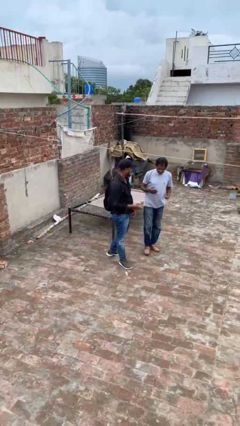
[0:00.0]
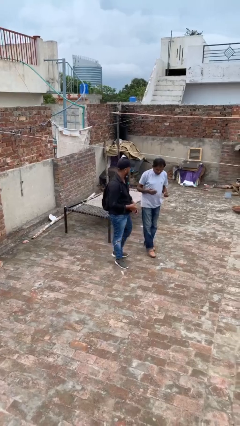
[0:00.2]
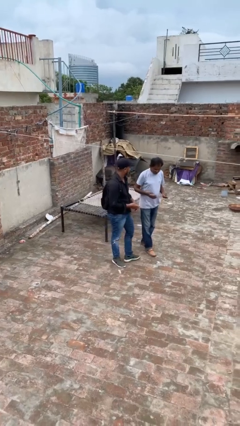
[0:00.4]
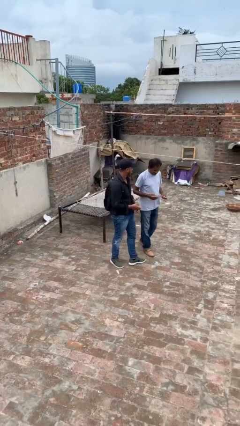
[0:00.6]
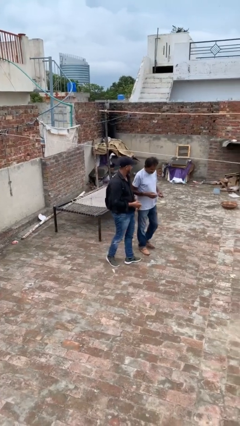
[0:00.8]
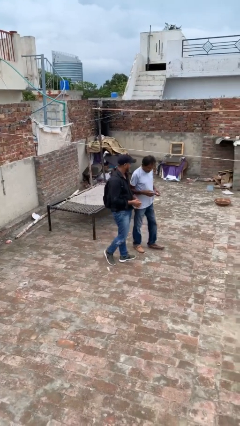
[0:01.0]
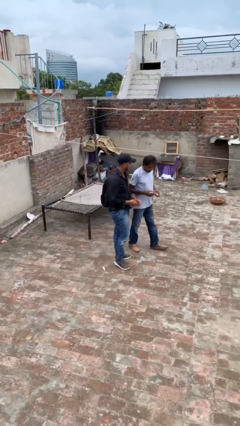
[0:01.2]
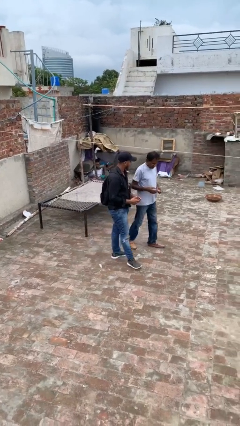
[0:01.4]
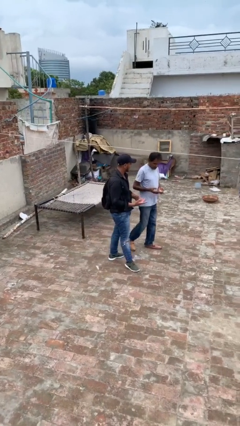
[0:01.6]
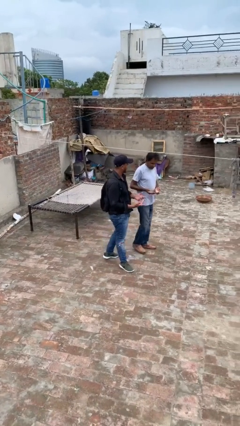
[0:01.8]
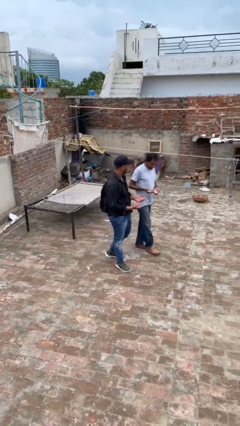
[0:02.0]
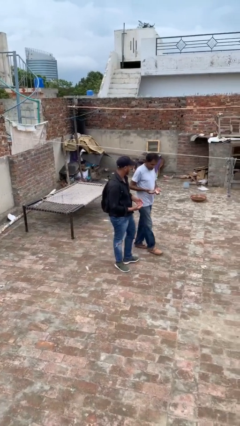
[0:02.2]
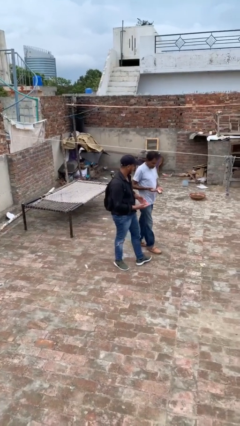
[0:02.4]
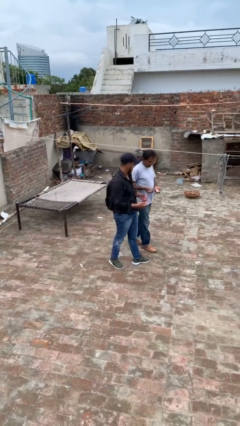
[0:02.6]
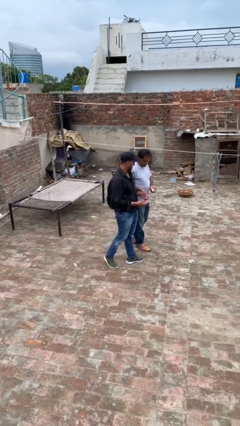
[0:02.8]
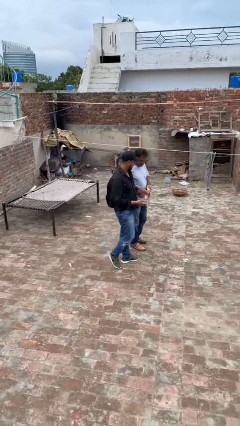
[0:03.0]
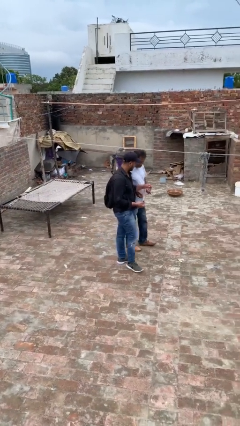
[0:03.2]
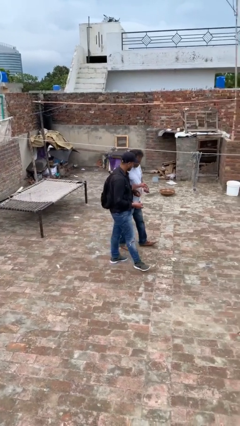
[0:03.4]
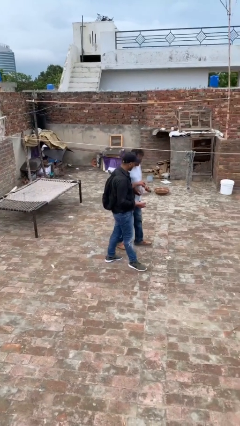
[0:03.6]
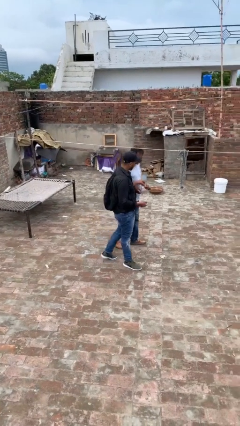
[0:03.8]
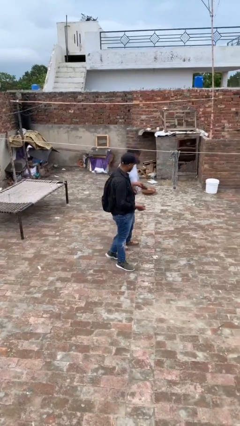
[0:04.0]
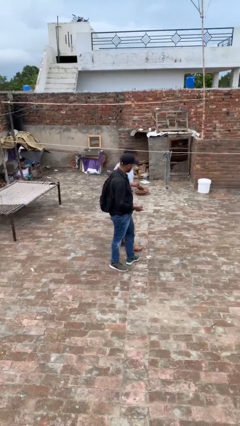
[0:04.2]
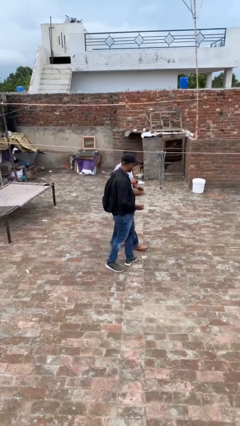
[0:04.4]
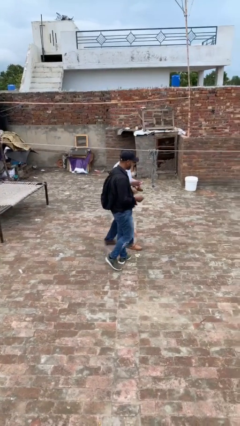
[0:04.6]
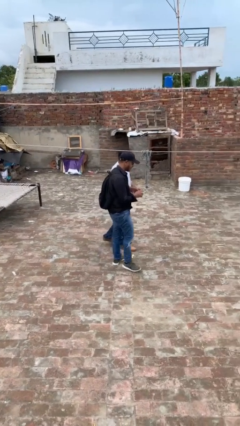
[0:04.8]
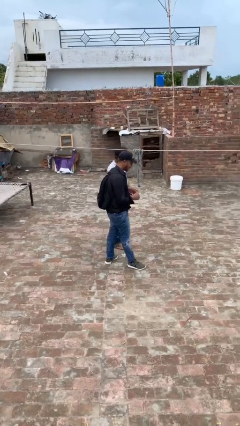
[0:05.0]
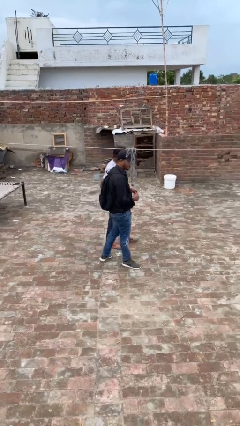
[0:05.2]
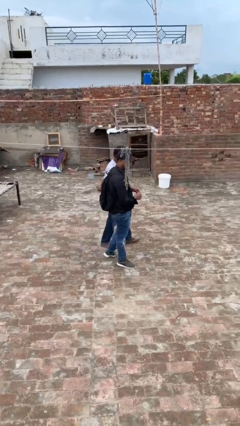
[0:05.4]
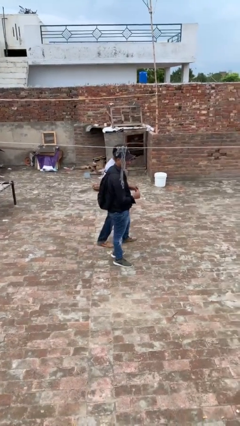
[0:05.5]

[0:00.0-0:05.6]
person talks to person

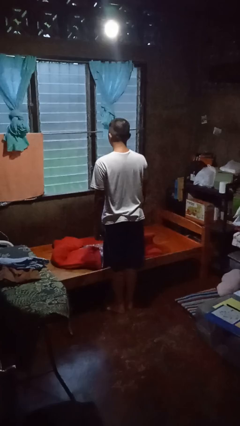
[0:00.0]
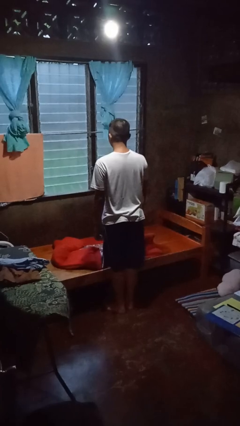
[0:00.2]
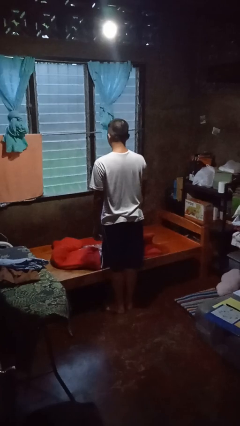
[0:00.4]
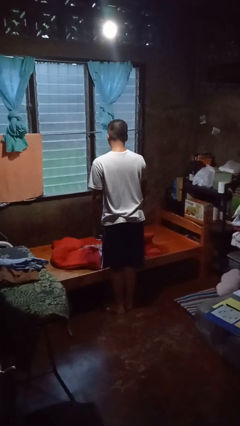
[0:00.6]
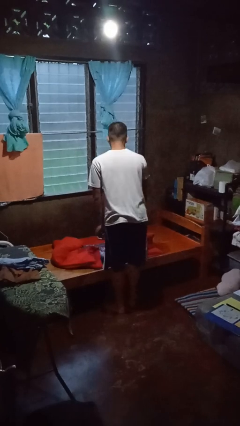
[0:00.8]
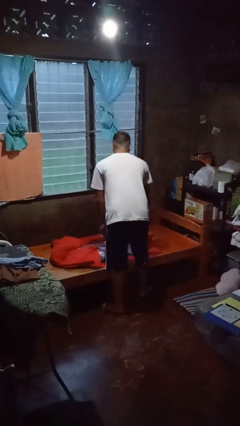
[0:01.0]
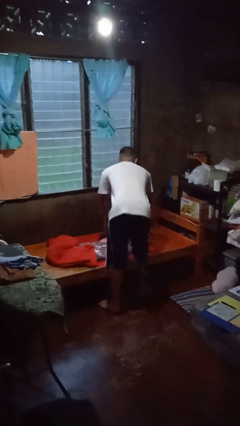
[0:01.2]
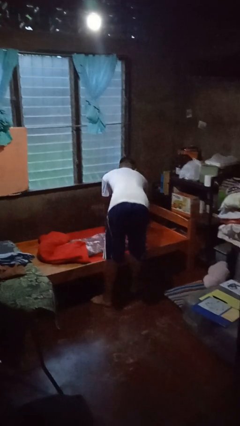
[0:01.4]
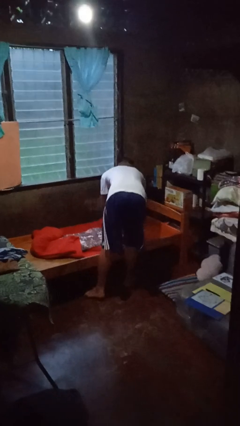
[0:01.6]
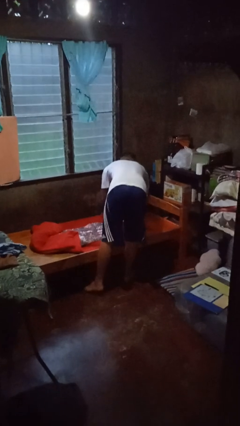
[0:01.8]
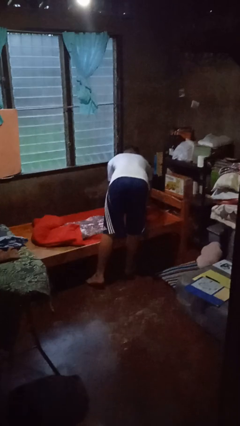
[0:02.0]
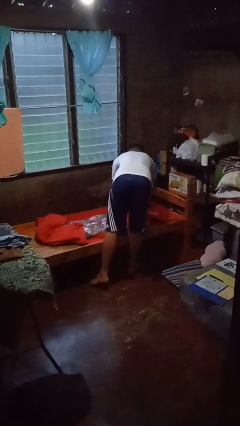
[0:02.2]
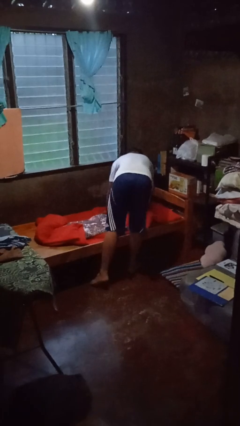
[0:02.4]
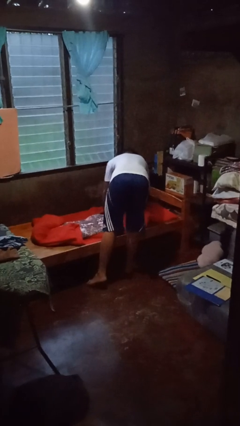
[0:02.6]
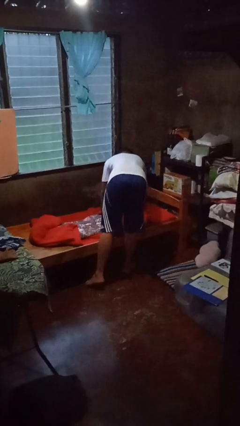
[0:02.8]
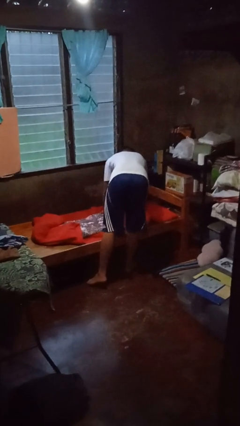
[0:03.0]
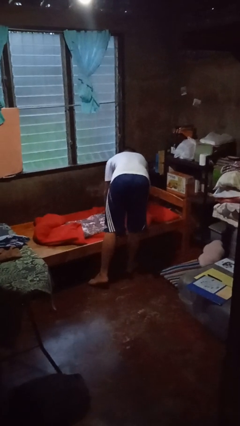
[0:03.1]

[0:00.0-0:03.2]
person makes bed

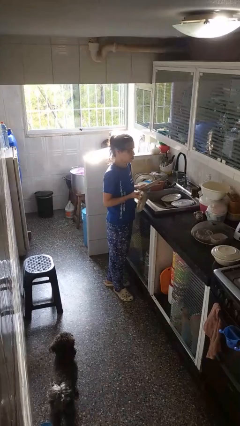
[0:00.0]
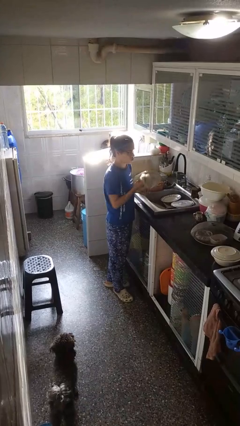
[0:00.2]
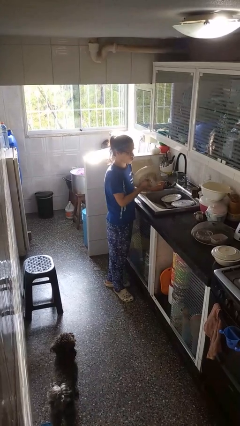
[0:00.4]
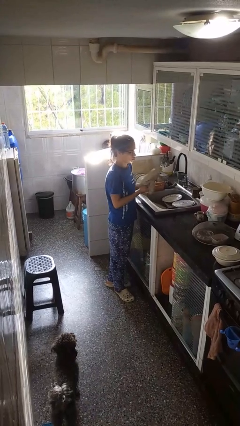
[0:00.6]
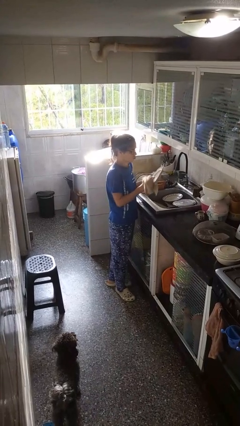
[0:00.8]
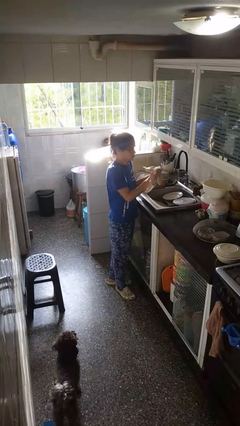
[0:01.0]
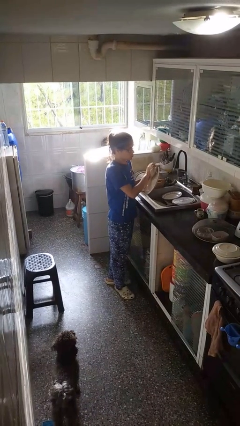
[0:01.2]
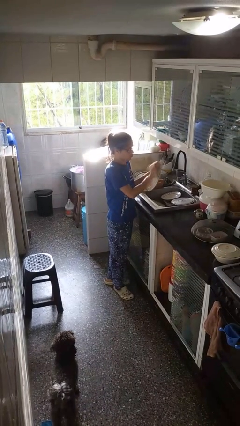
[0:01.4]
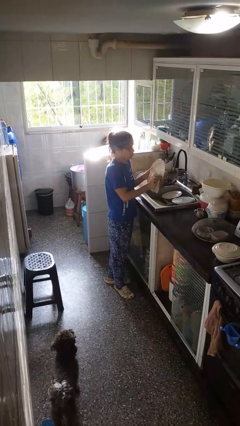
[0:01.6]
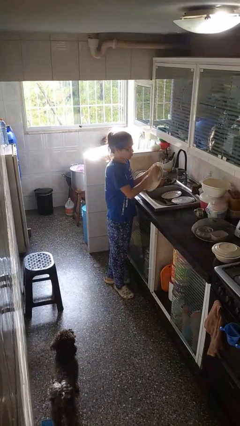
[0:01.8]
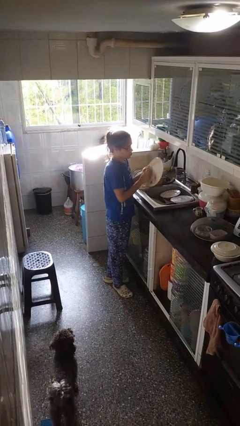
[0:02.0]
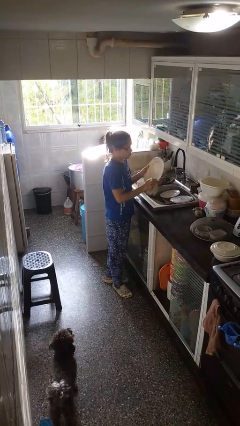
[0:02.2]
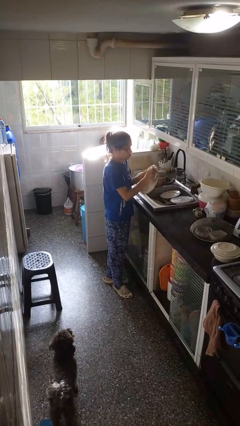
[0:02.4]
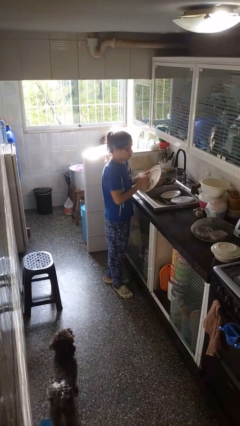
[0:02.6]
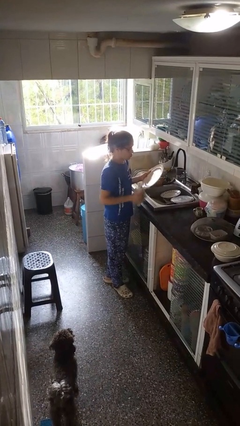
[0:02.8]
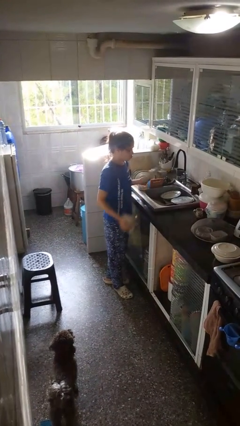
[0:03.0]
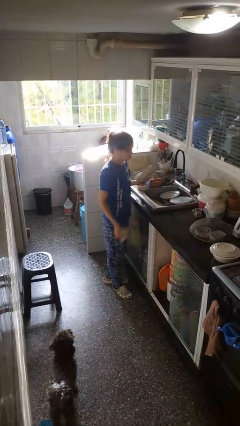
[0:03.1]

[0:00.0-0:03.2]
person dries dish

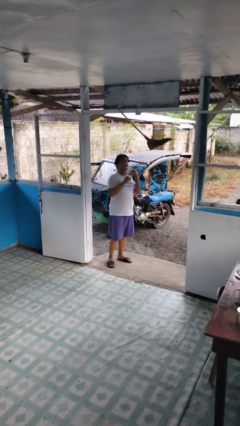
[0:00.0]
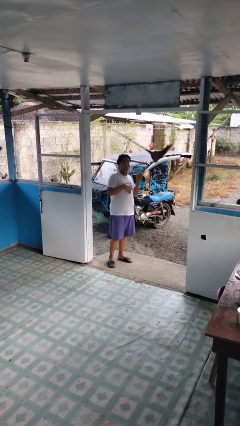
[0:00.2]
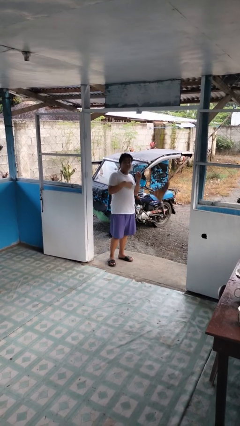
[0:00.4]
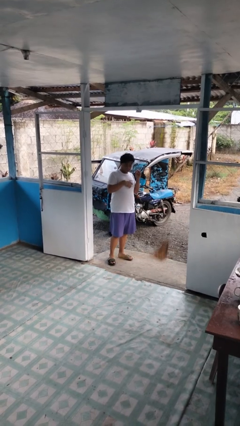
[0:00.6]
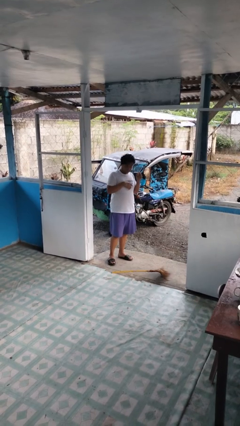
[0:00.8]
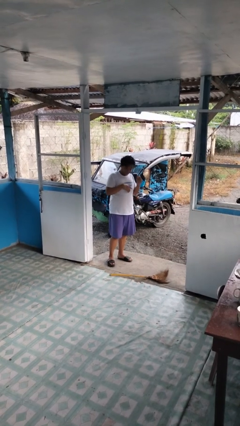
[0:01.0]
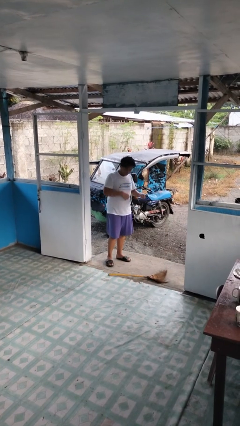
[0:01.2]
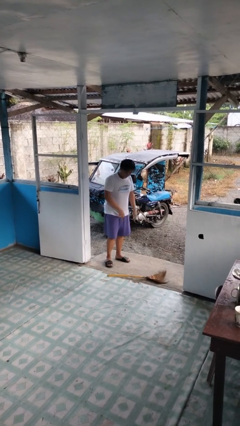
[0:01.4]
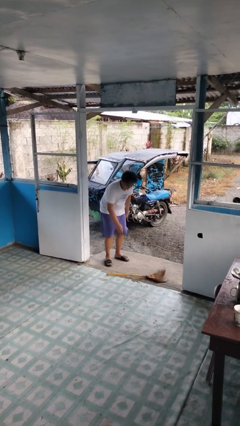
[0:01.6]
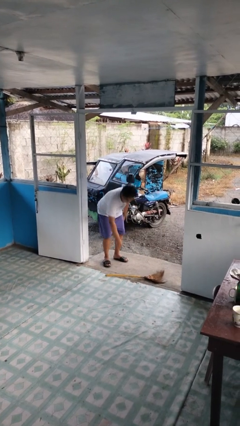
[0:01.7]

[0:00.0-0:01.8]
person throws object into air

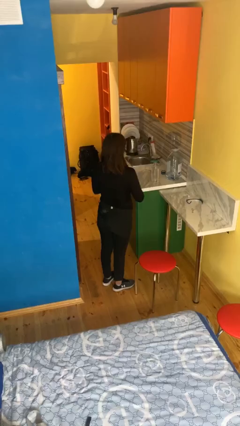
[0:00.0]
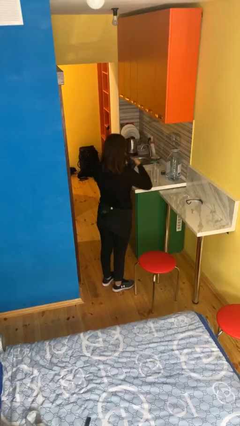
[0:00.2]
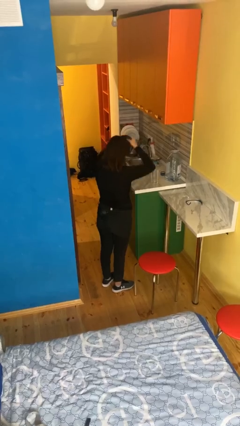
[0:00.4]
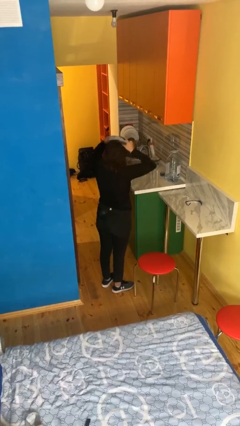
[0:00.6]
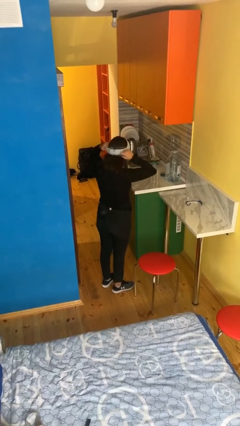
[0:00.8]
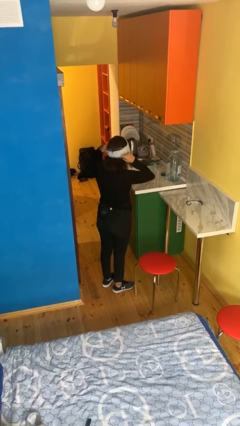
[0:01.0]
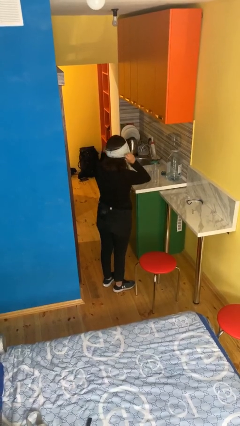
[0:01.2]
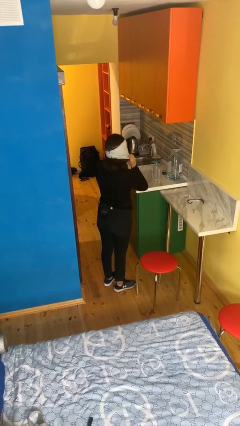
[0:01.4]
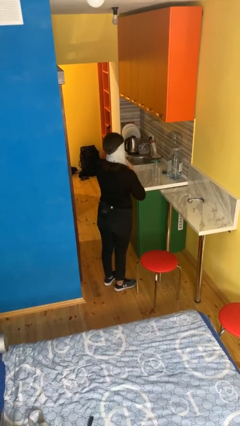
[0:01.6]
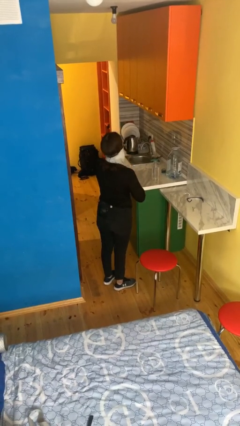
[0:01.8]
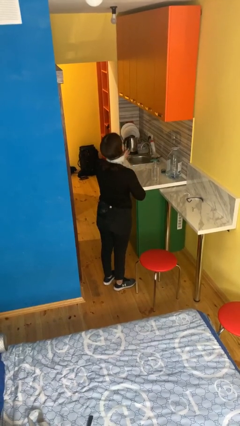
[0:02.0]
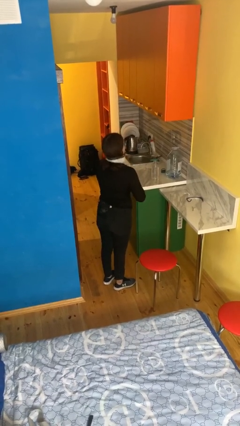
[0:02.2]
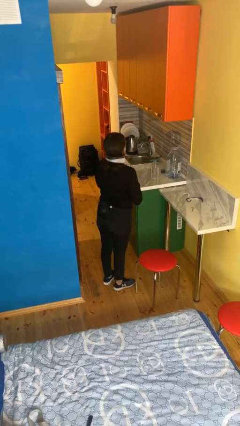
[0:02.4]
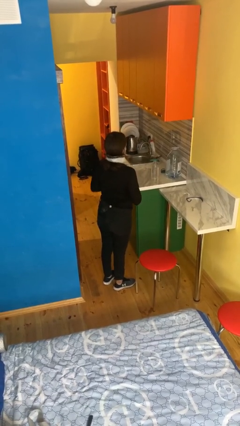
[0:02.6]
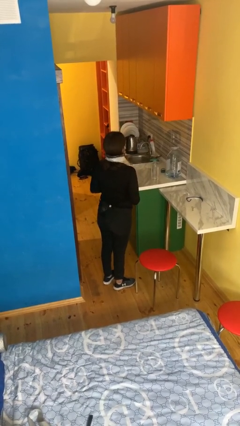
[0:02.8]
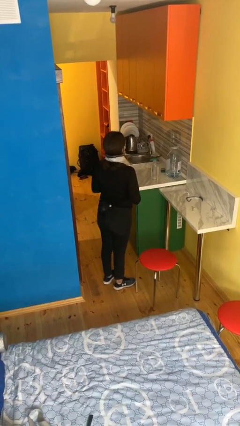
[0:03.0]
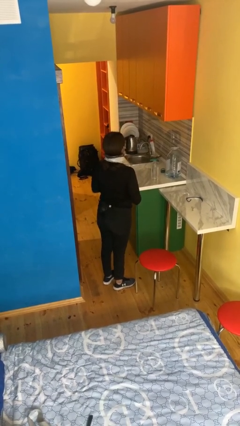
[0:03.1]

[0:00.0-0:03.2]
person puts on scarf

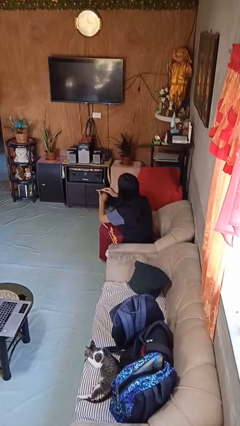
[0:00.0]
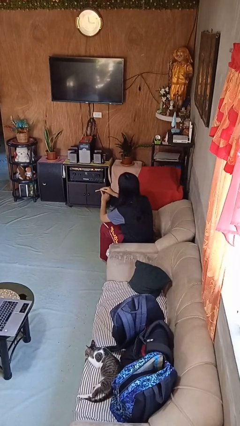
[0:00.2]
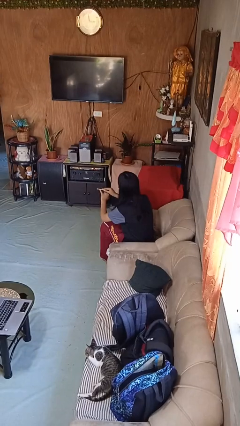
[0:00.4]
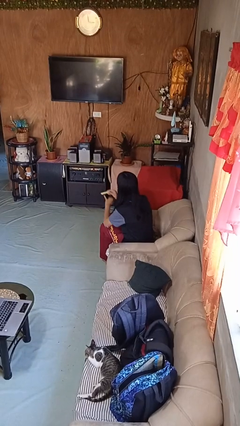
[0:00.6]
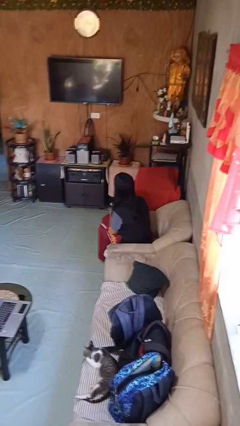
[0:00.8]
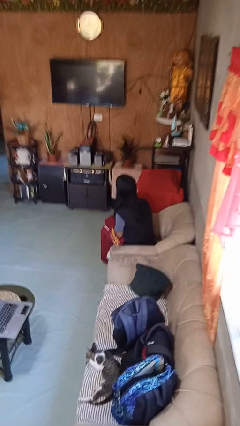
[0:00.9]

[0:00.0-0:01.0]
person files fingernails
